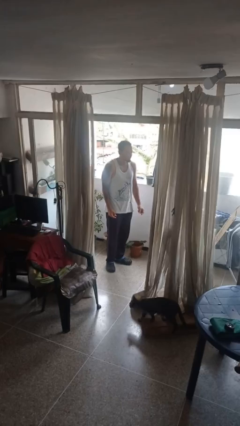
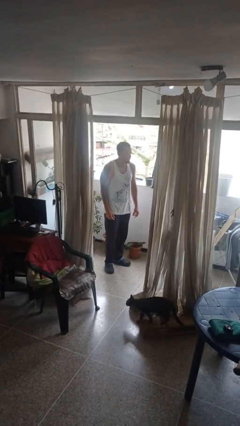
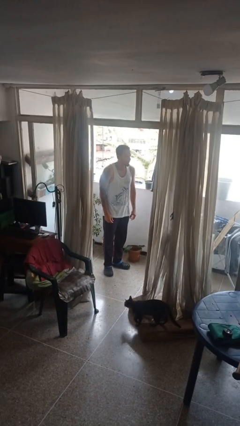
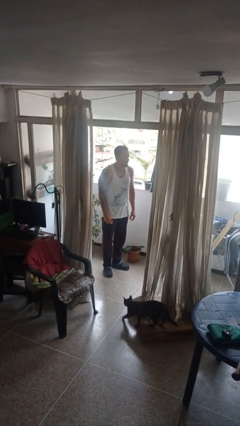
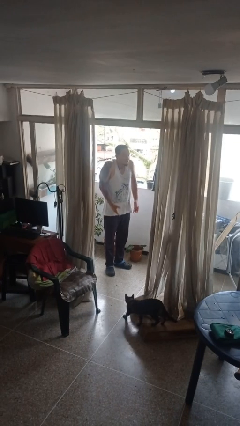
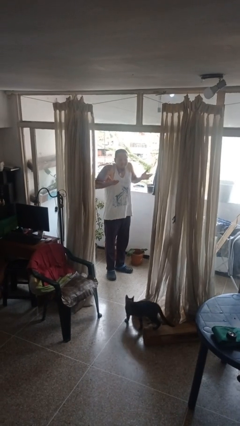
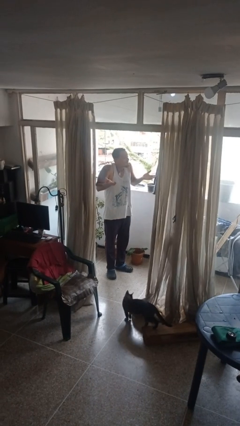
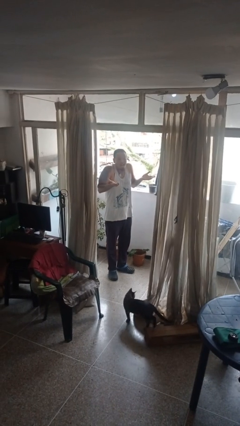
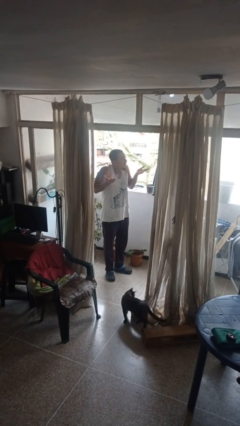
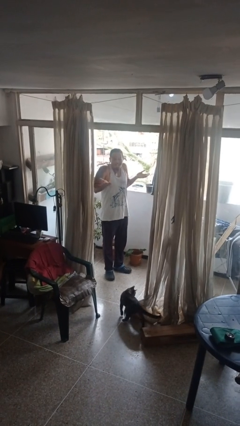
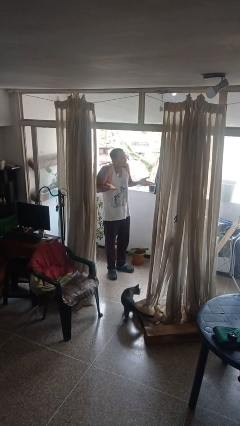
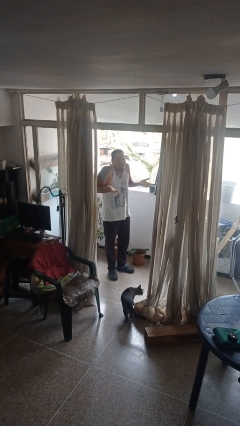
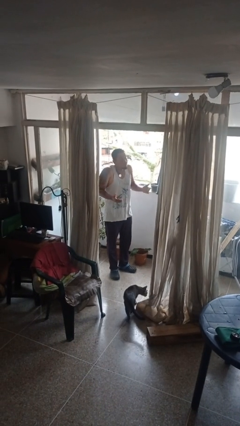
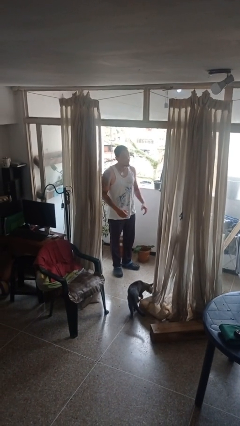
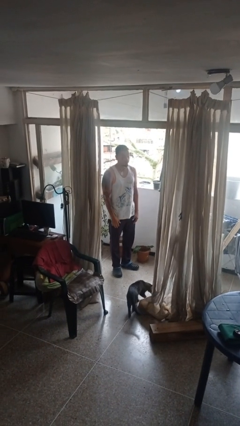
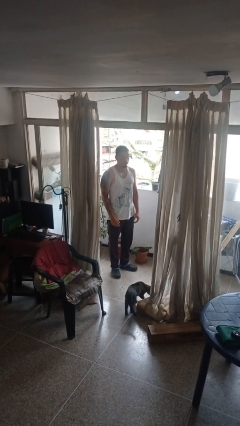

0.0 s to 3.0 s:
person shrugs

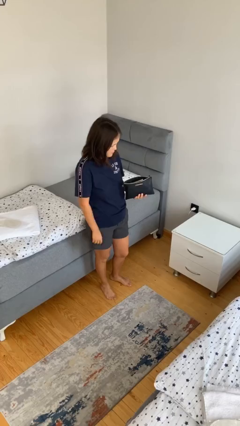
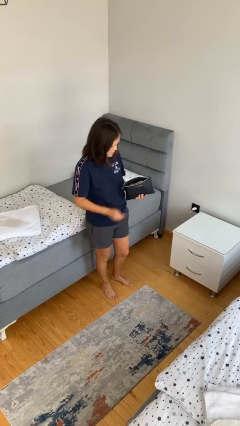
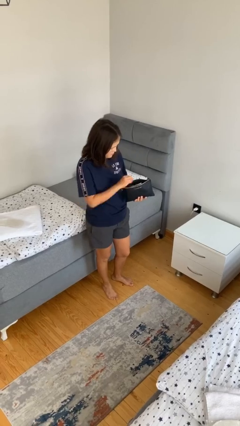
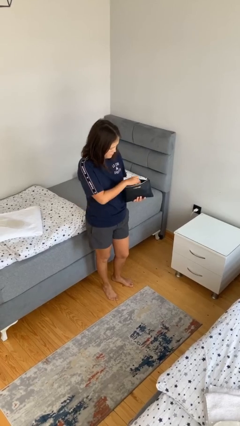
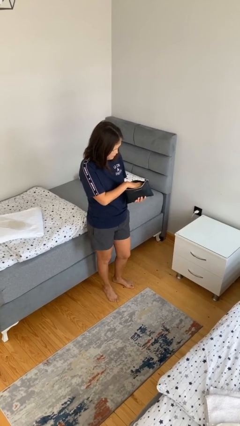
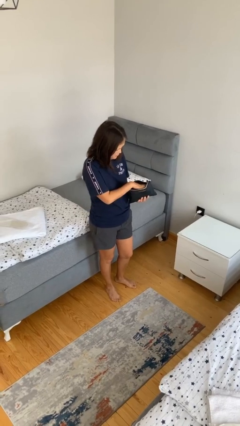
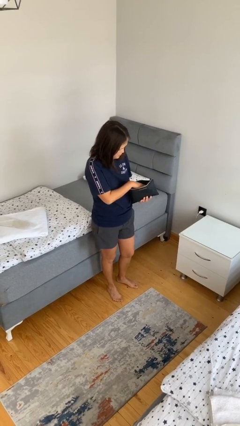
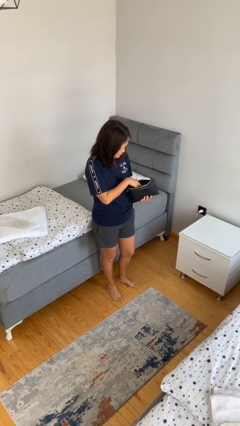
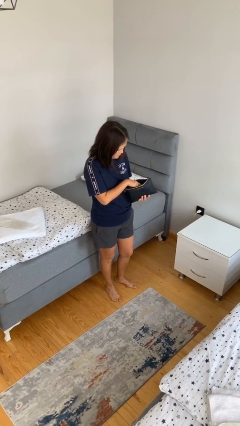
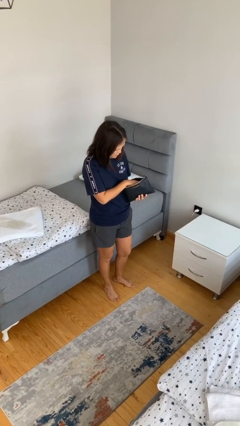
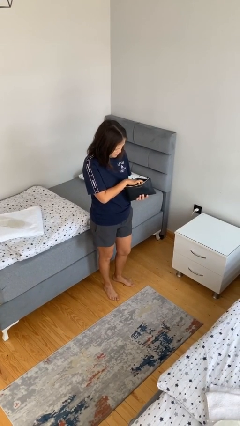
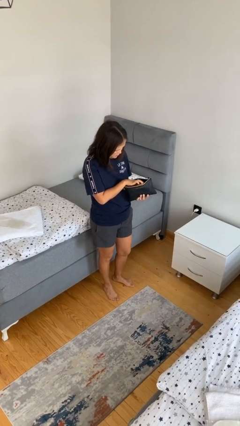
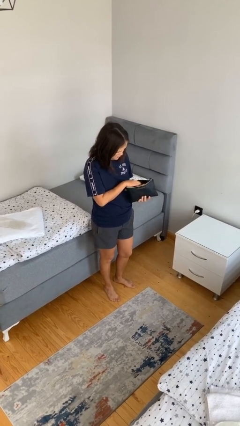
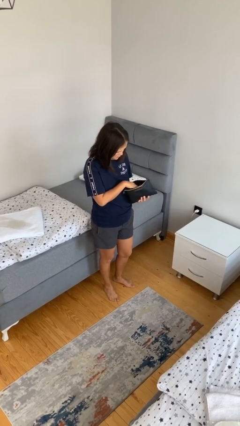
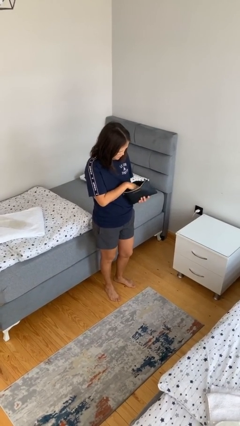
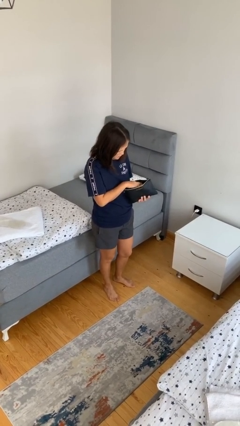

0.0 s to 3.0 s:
person searches in purse

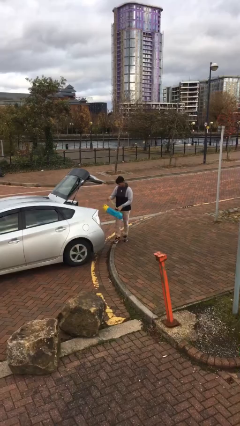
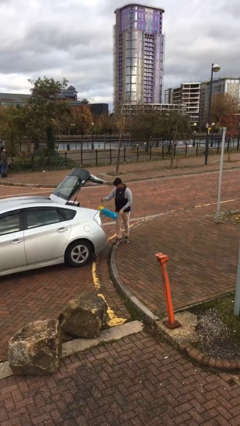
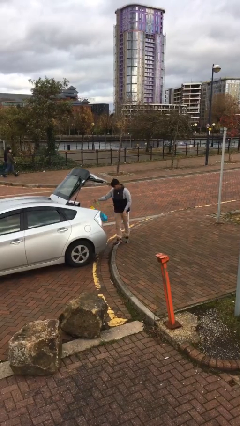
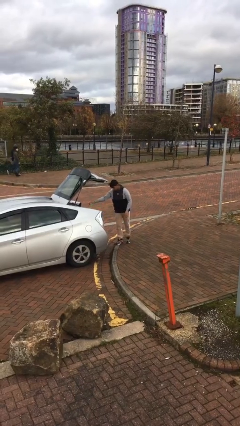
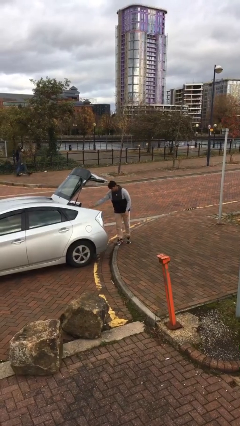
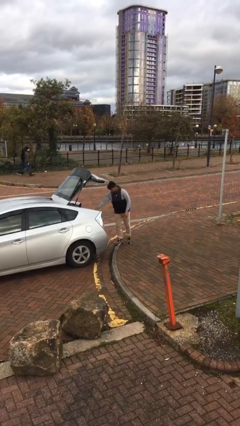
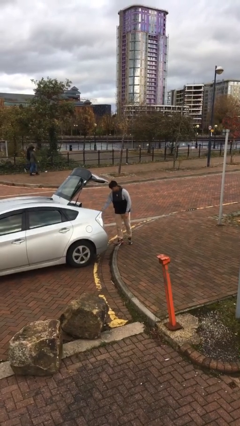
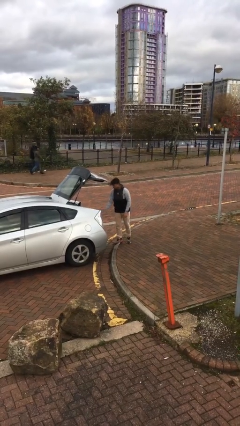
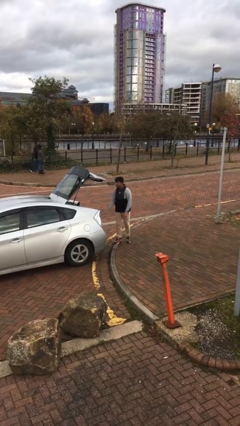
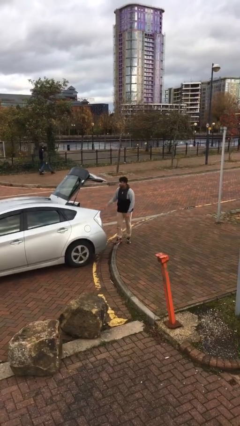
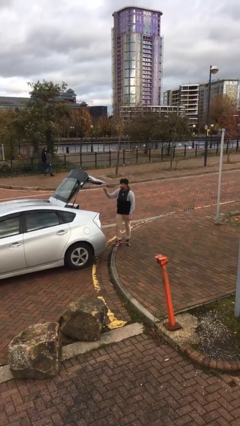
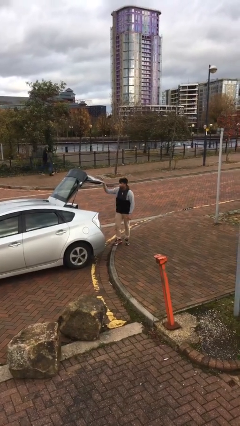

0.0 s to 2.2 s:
person loads car

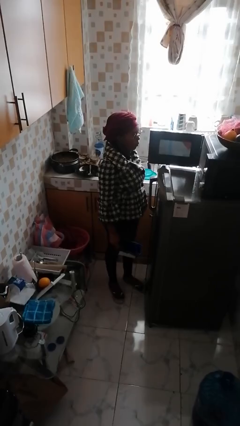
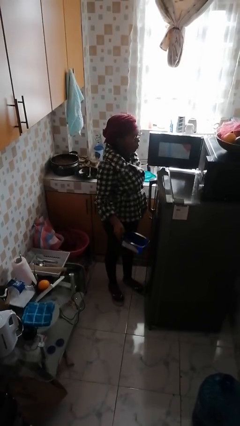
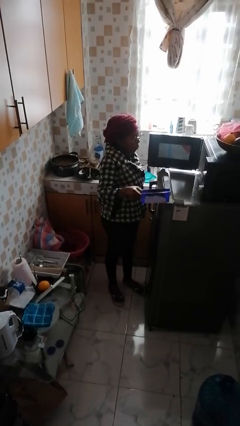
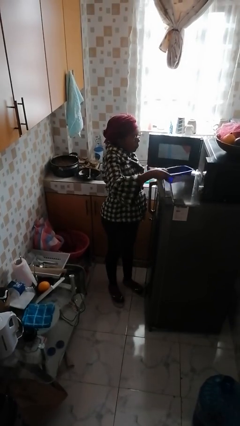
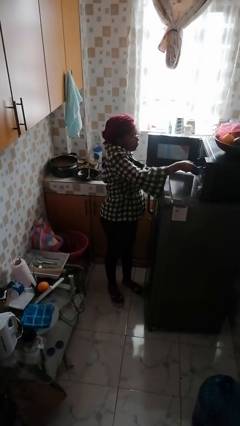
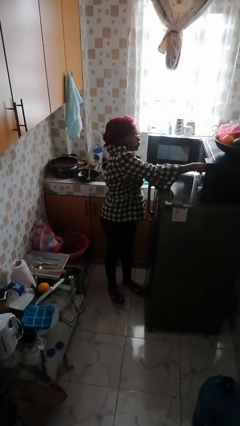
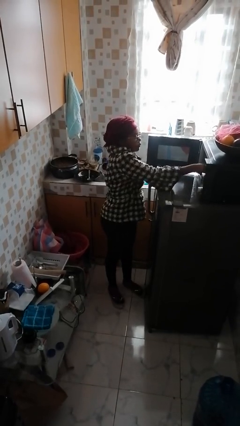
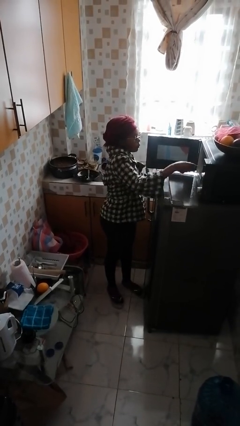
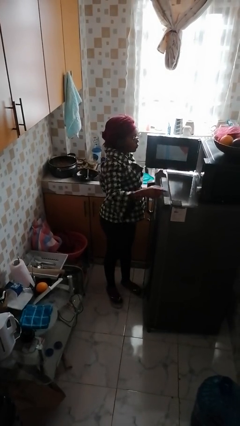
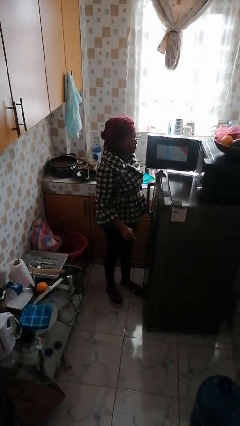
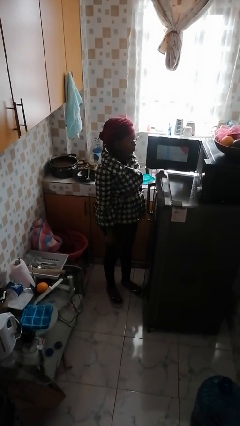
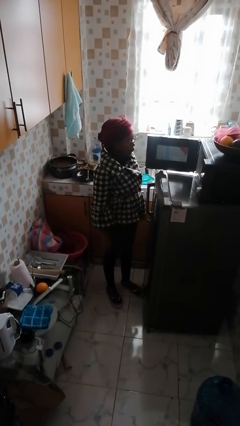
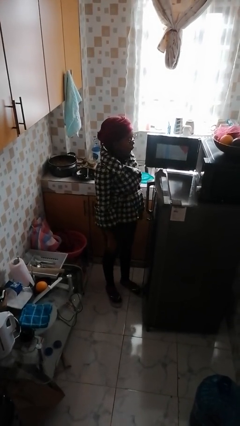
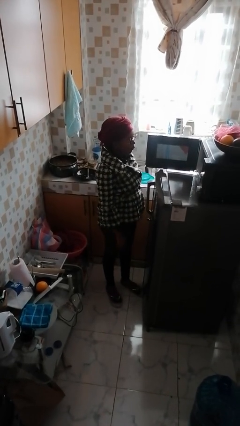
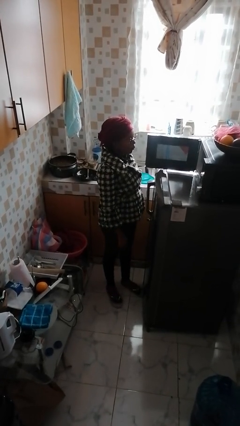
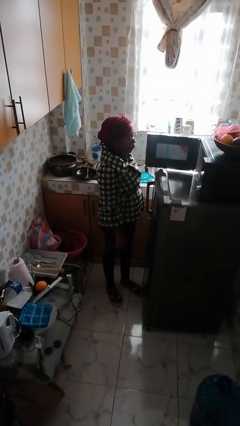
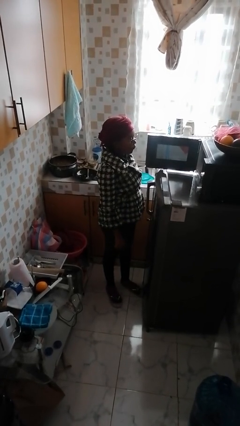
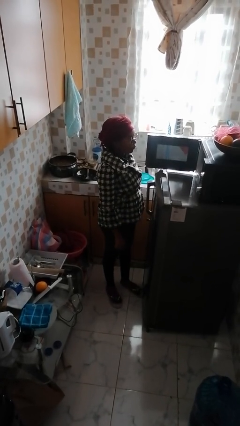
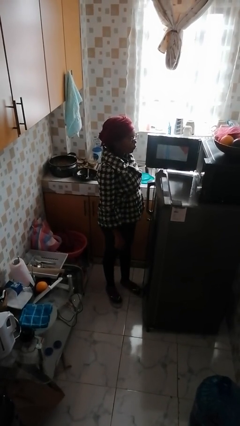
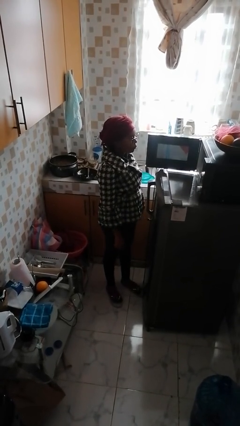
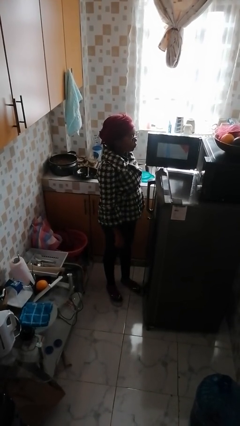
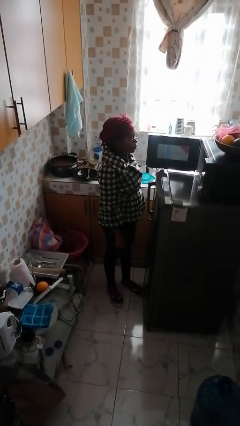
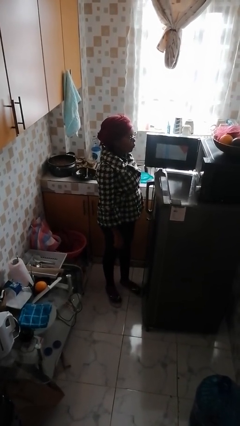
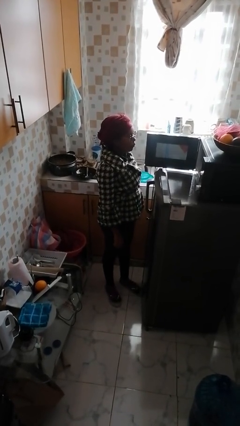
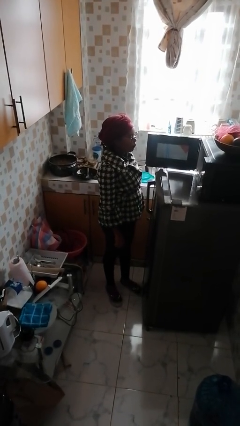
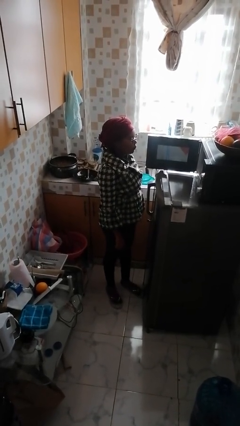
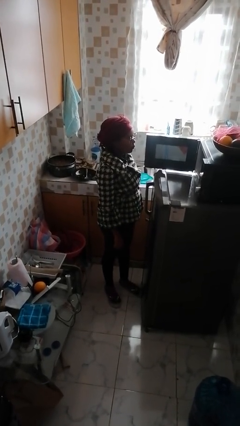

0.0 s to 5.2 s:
person puts object into microwave

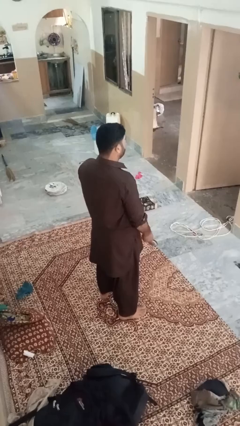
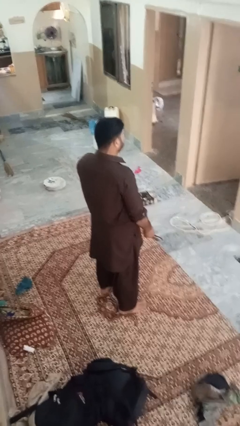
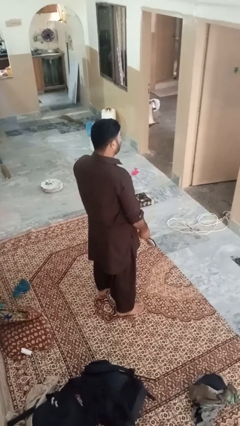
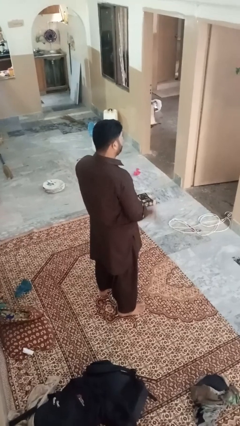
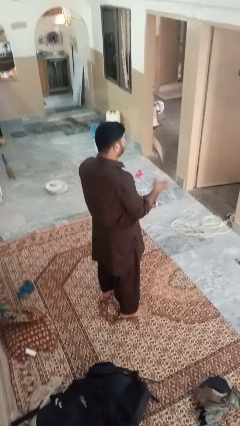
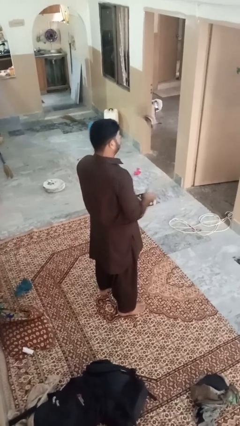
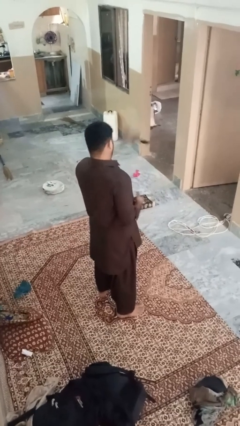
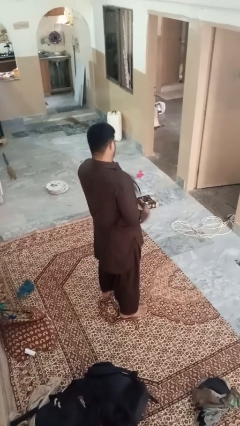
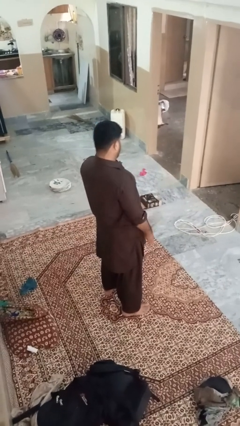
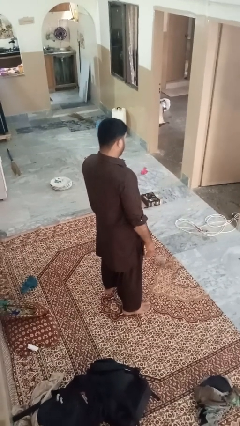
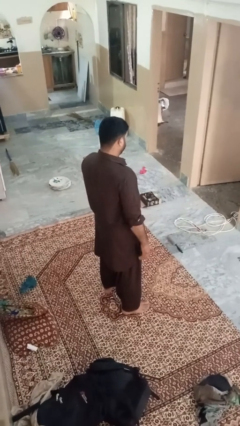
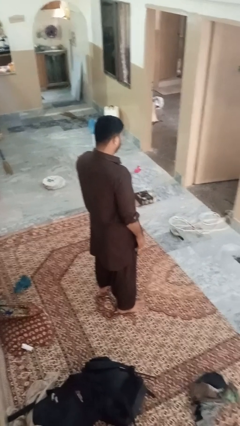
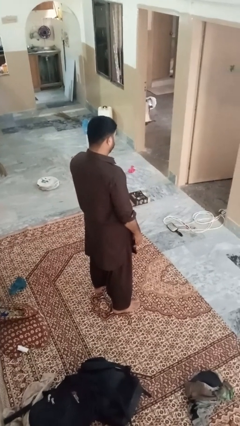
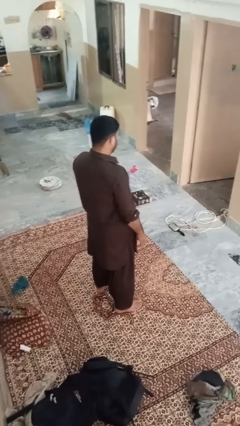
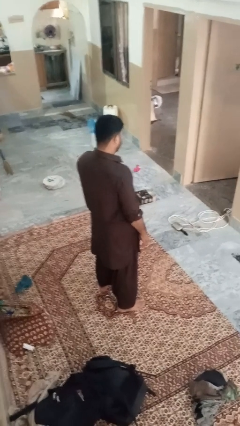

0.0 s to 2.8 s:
person throws object into air

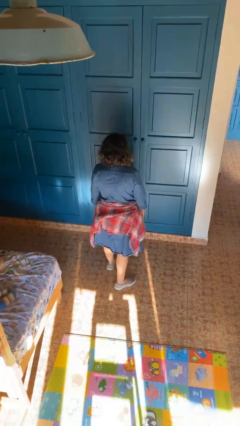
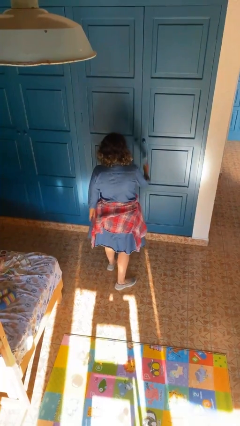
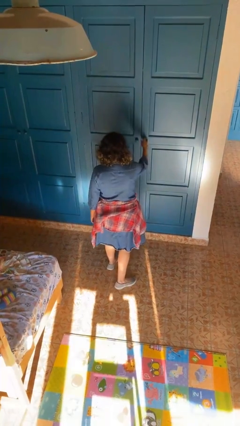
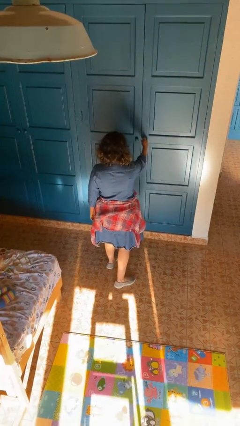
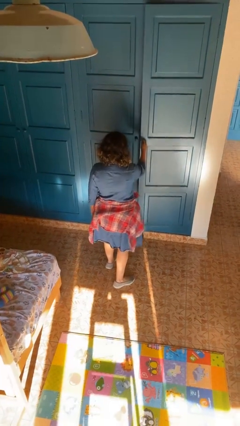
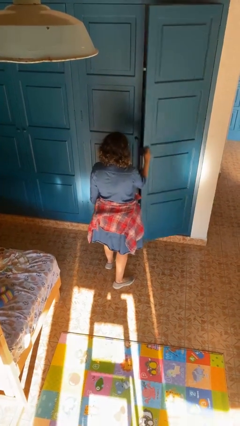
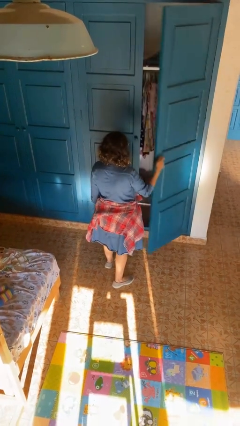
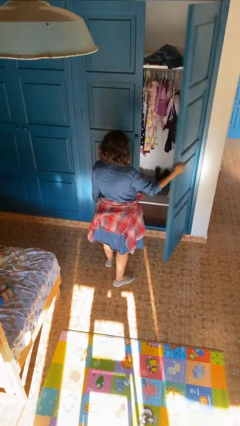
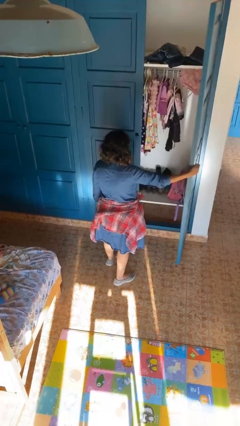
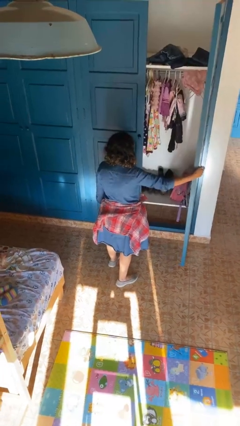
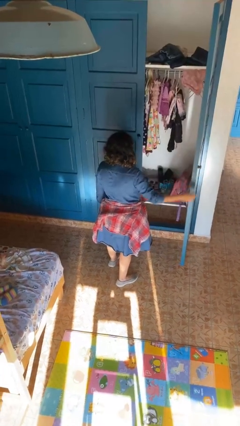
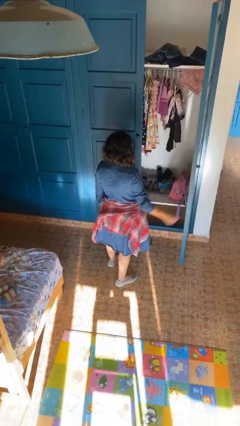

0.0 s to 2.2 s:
person opens closet door
